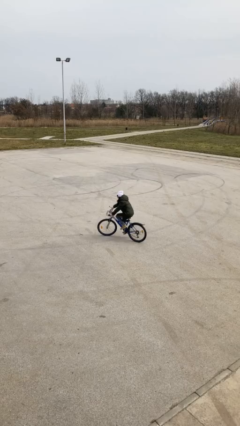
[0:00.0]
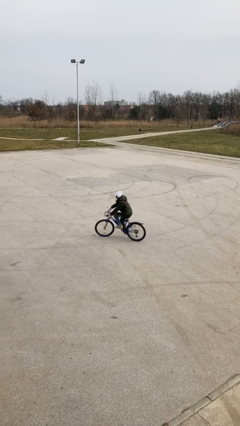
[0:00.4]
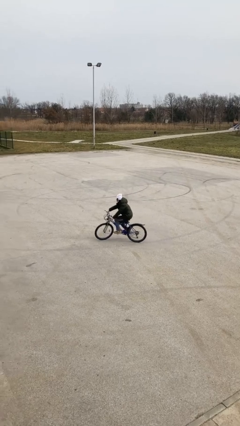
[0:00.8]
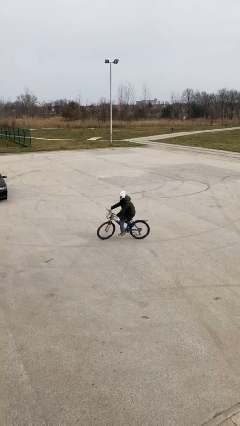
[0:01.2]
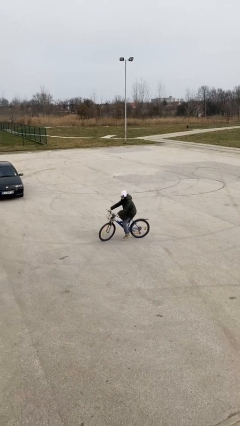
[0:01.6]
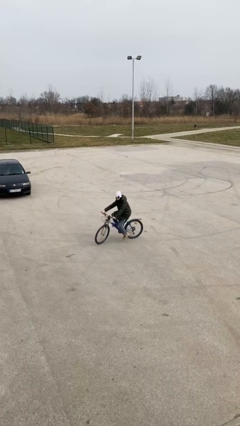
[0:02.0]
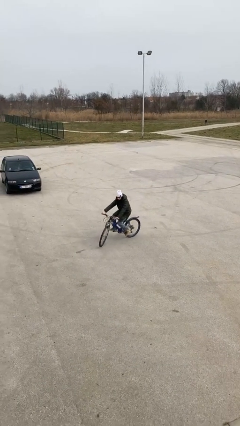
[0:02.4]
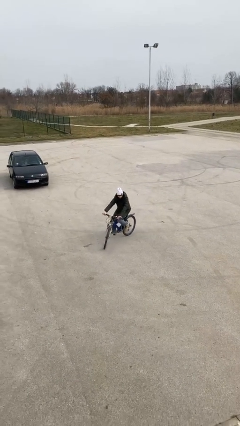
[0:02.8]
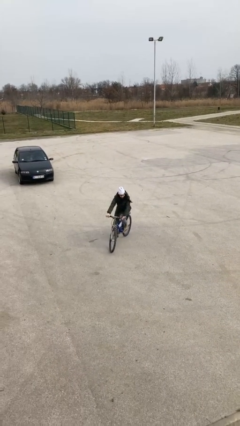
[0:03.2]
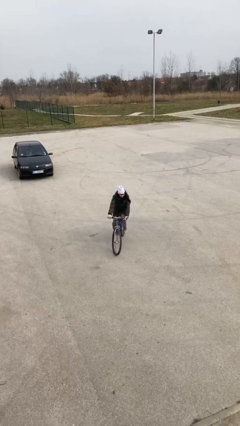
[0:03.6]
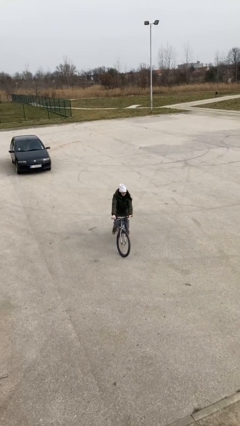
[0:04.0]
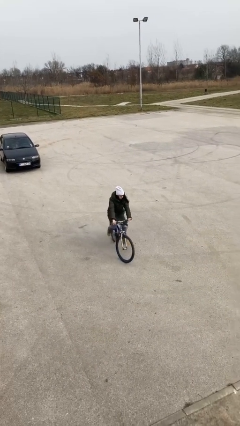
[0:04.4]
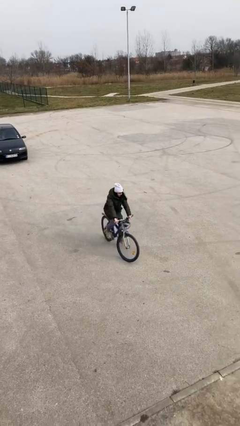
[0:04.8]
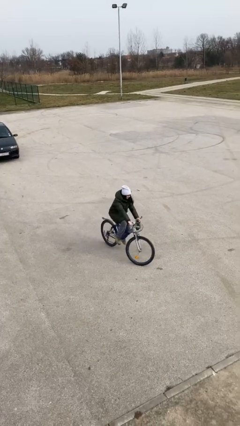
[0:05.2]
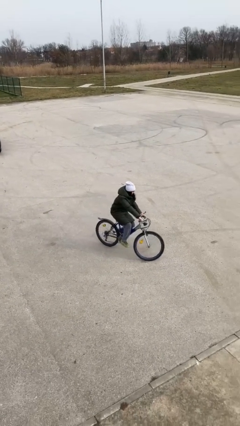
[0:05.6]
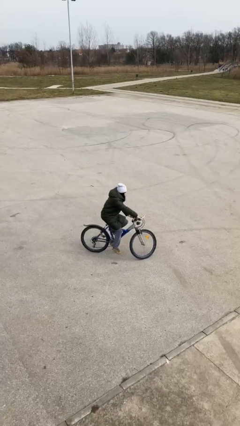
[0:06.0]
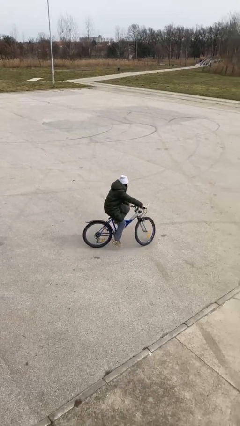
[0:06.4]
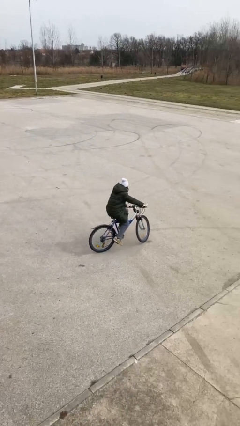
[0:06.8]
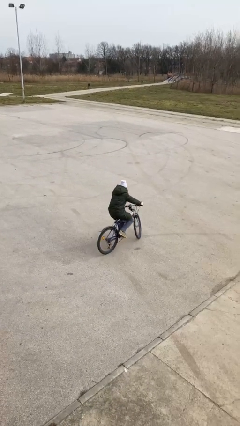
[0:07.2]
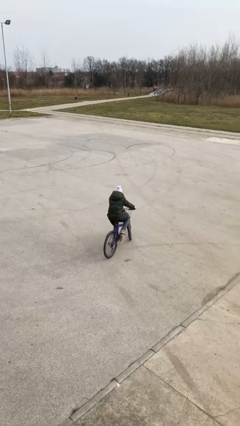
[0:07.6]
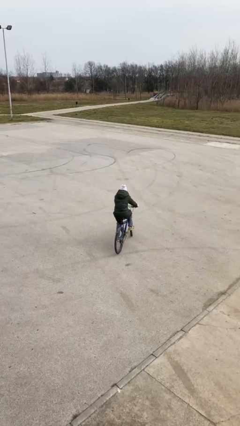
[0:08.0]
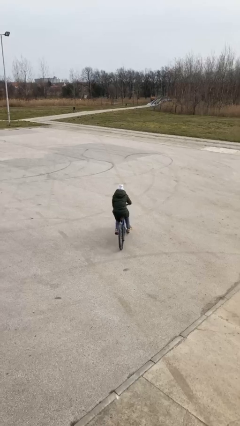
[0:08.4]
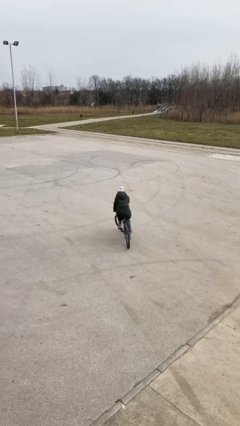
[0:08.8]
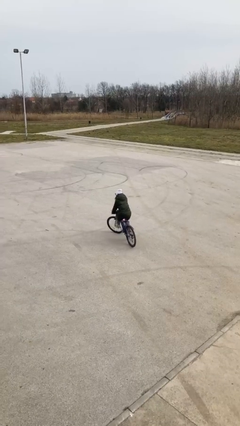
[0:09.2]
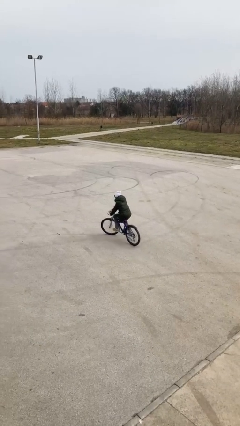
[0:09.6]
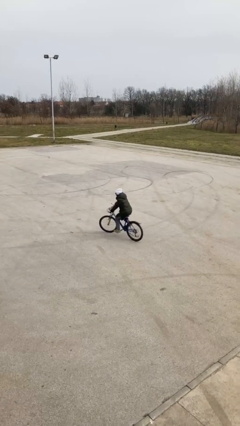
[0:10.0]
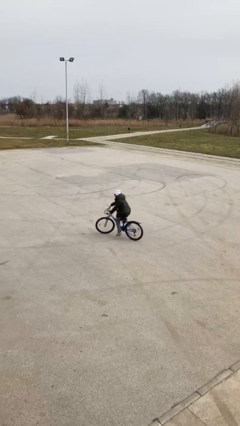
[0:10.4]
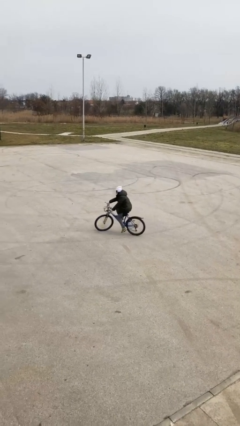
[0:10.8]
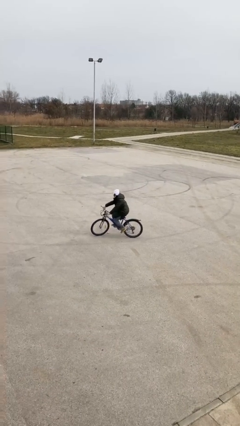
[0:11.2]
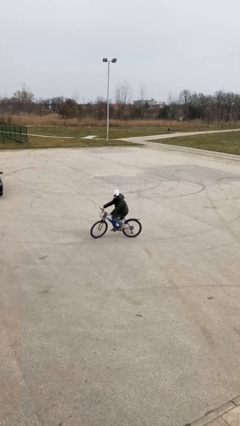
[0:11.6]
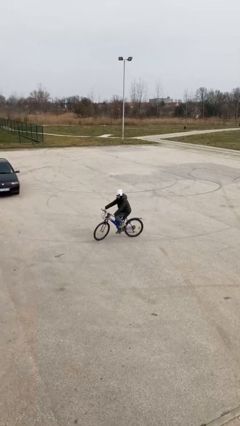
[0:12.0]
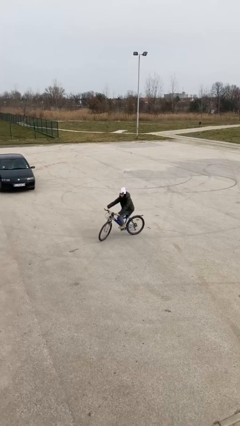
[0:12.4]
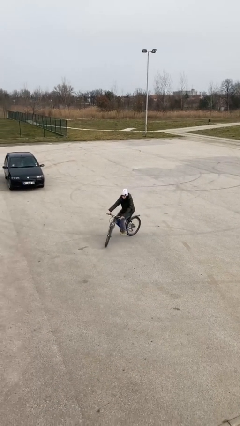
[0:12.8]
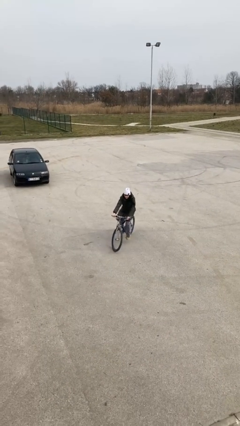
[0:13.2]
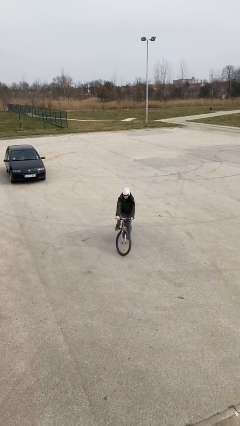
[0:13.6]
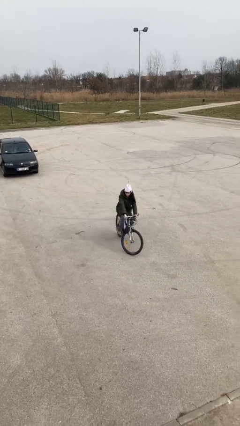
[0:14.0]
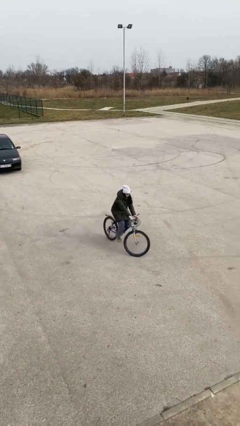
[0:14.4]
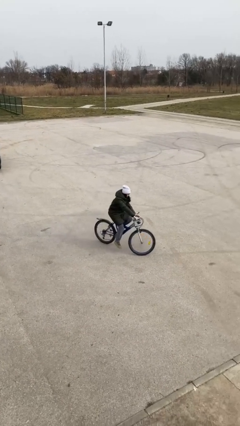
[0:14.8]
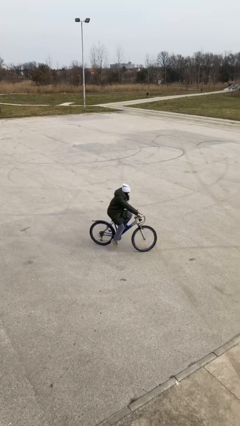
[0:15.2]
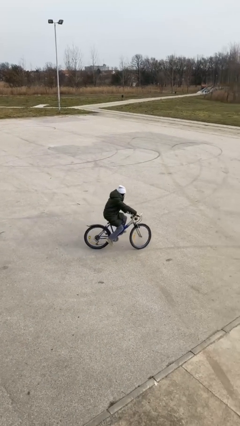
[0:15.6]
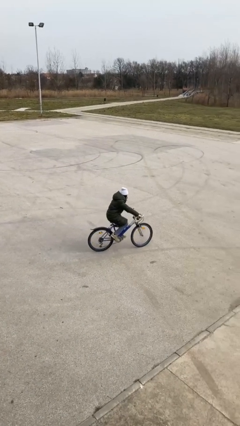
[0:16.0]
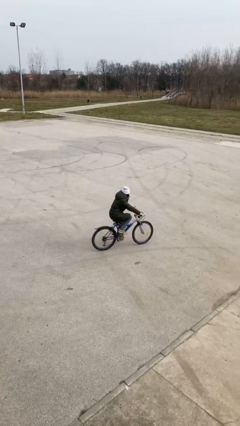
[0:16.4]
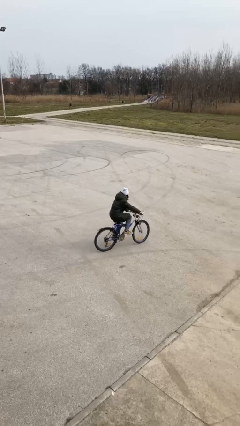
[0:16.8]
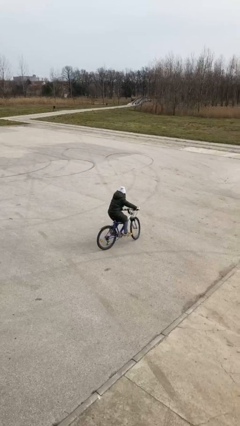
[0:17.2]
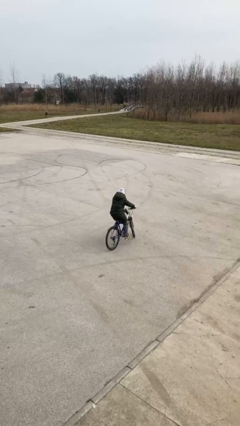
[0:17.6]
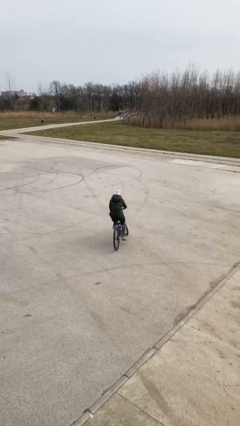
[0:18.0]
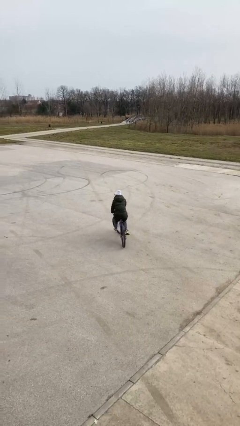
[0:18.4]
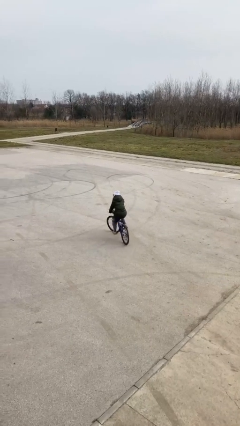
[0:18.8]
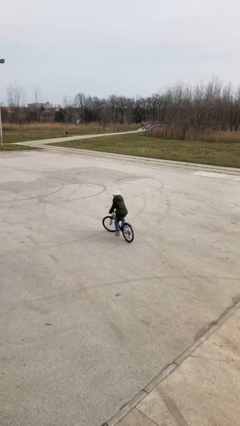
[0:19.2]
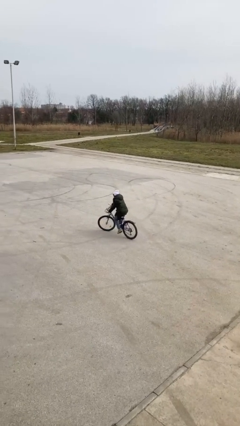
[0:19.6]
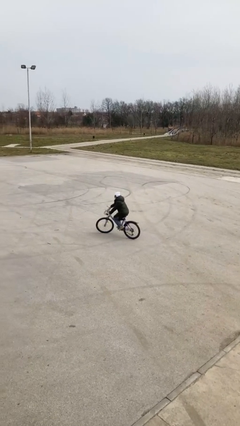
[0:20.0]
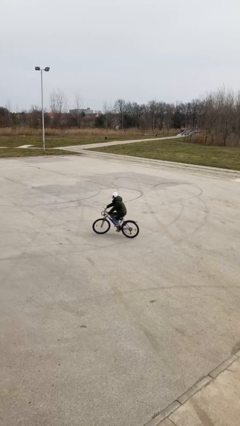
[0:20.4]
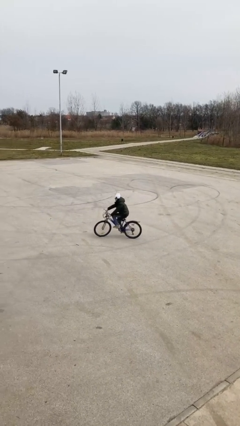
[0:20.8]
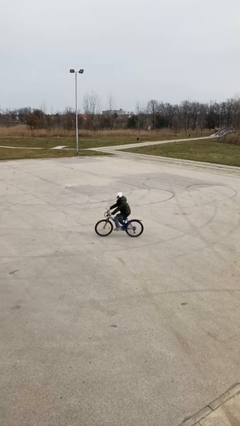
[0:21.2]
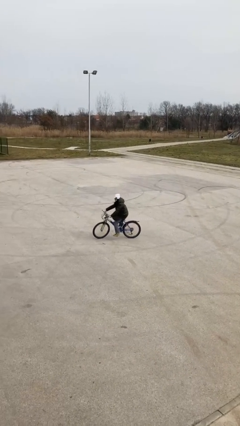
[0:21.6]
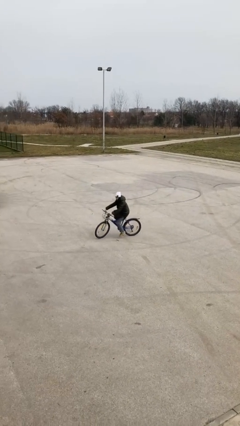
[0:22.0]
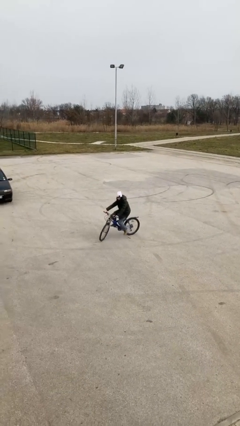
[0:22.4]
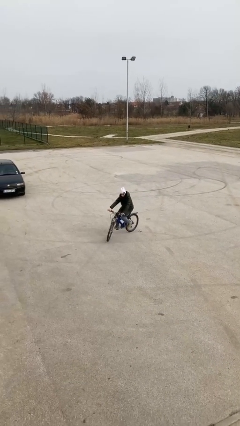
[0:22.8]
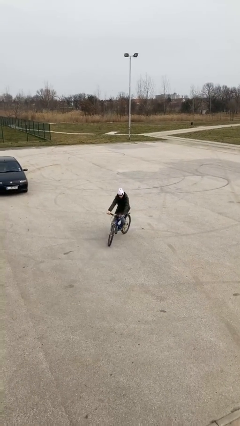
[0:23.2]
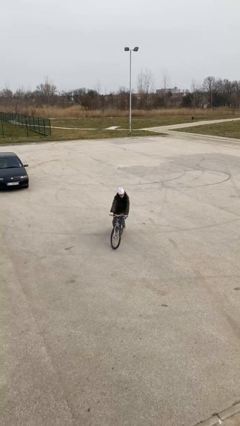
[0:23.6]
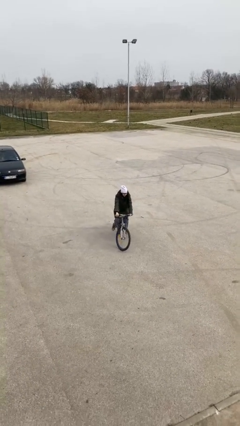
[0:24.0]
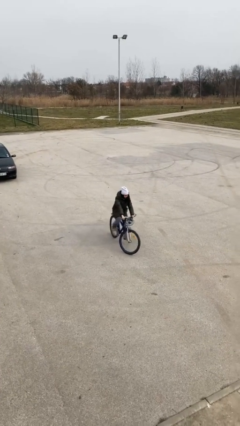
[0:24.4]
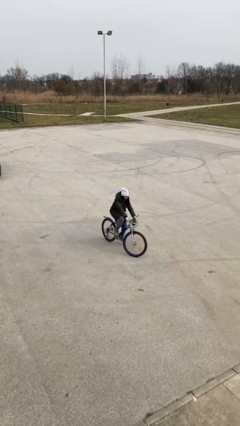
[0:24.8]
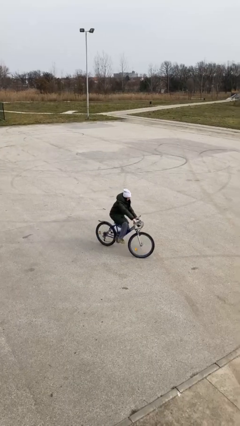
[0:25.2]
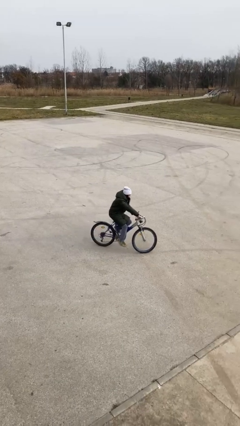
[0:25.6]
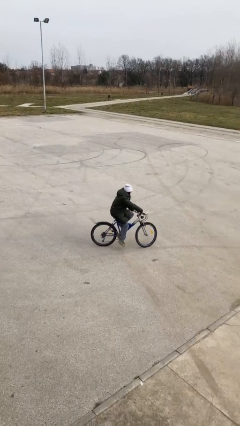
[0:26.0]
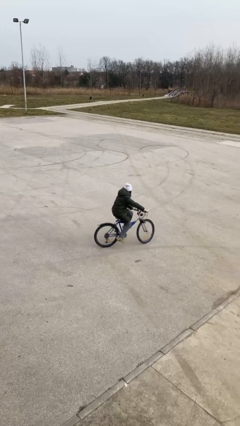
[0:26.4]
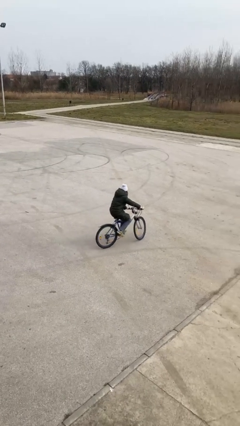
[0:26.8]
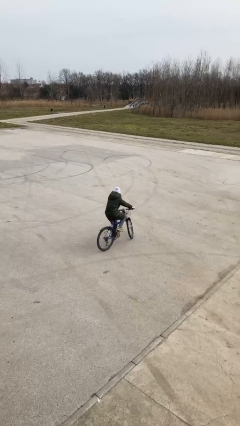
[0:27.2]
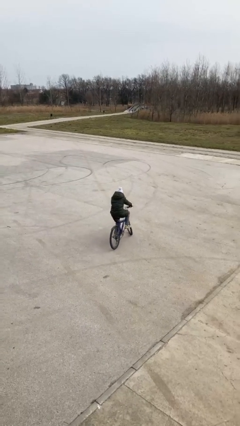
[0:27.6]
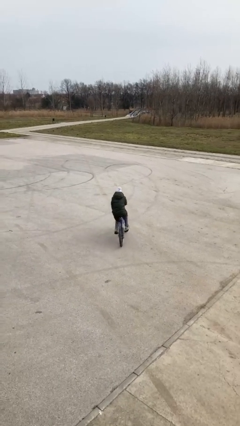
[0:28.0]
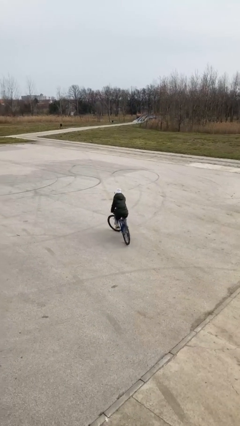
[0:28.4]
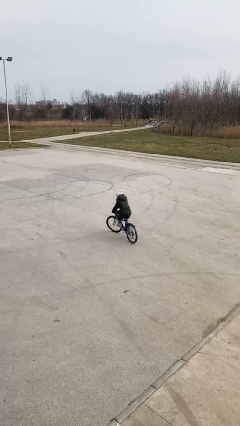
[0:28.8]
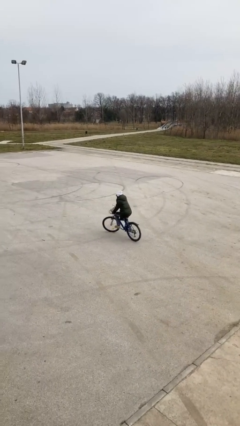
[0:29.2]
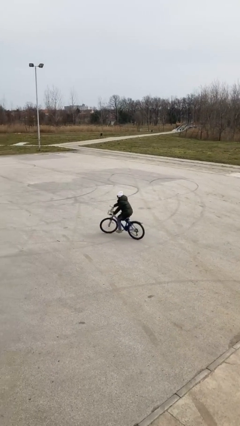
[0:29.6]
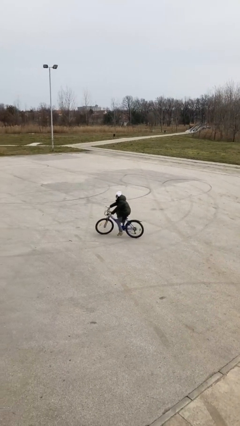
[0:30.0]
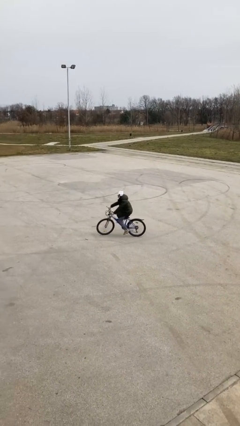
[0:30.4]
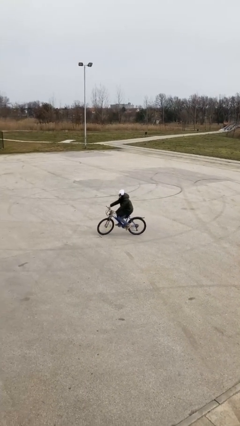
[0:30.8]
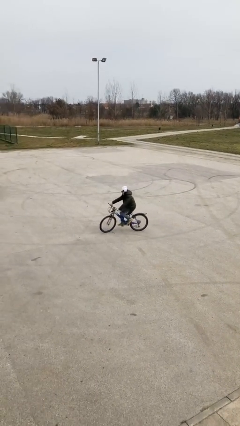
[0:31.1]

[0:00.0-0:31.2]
person rides bicycle

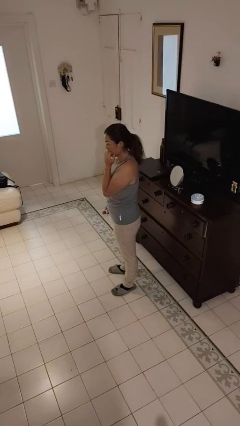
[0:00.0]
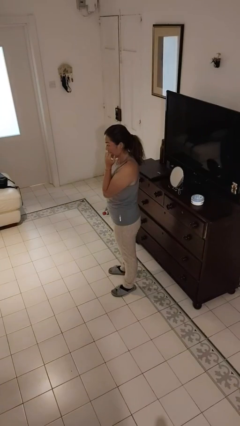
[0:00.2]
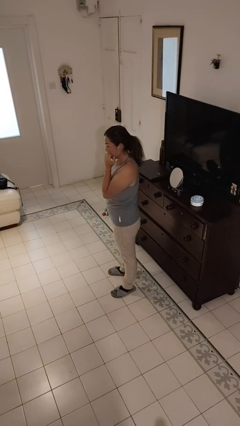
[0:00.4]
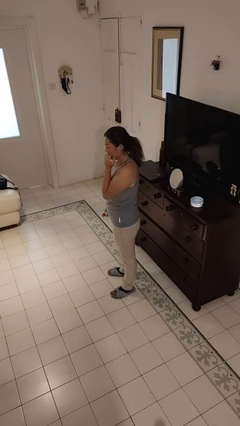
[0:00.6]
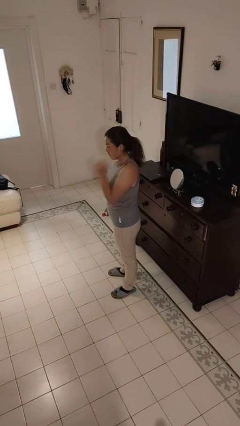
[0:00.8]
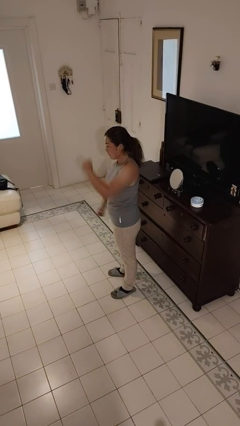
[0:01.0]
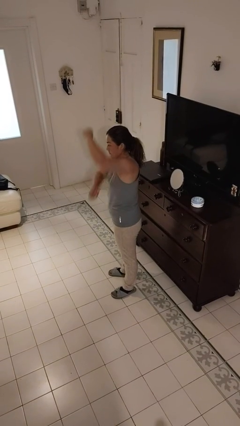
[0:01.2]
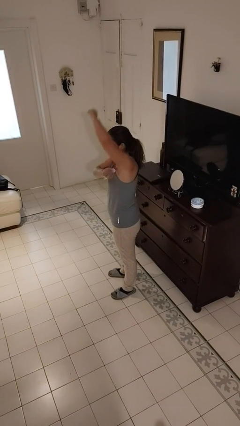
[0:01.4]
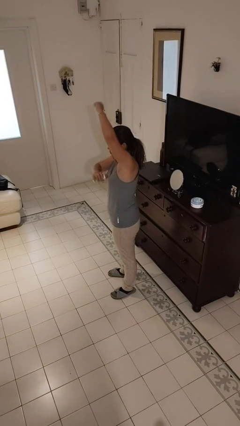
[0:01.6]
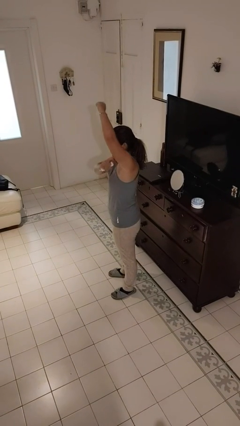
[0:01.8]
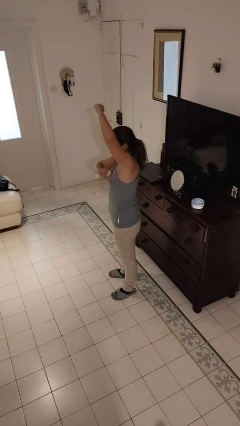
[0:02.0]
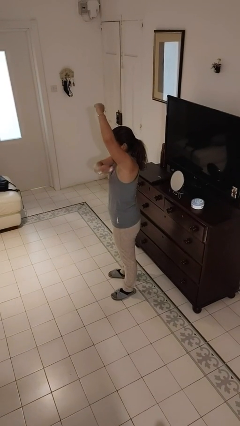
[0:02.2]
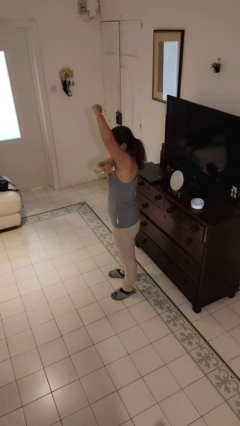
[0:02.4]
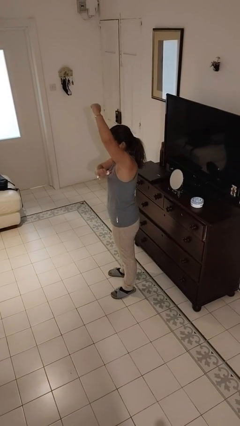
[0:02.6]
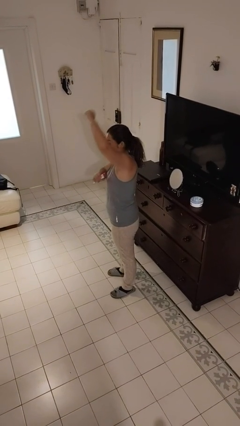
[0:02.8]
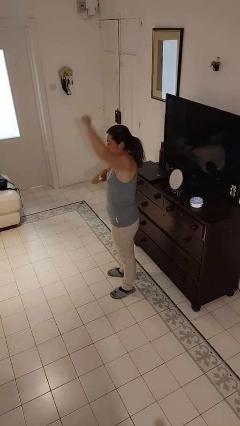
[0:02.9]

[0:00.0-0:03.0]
person applies deodorant
